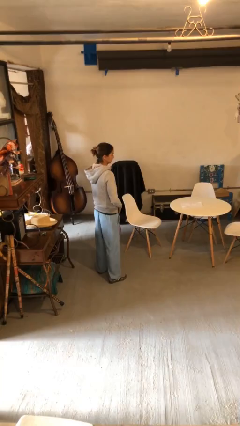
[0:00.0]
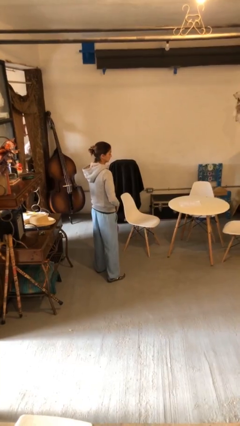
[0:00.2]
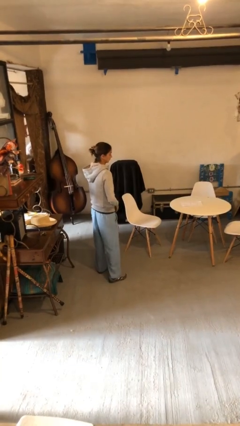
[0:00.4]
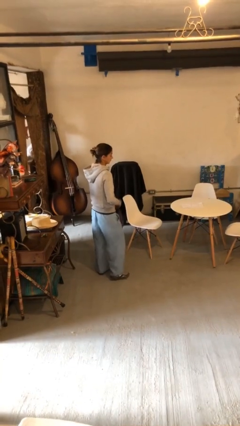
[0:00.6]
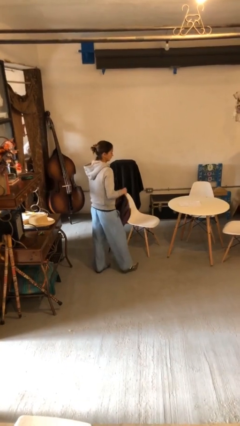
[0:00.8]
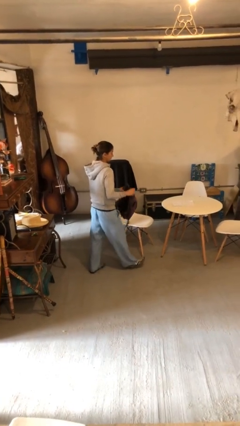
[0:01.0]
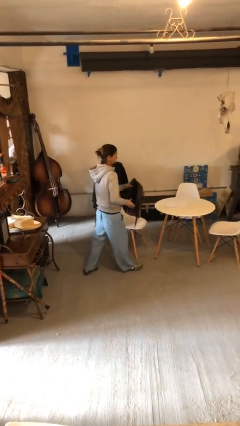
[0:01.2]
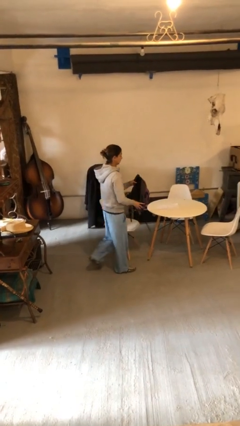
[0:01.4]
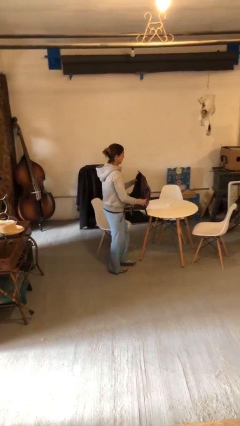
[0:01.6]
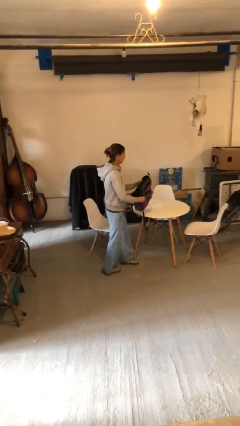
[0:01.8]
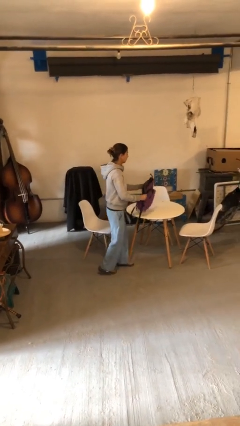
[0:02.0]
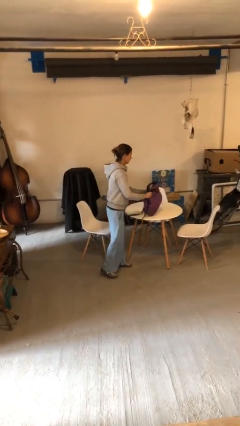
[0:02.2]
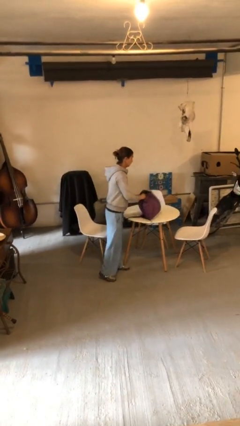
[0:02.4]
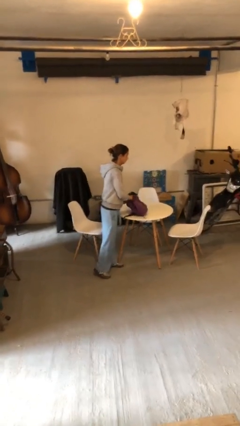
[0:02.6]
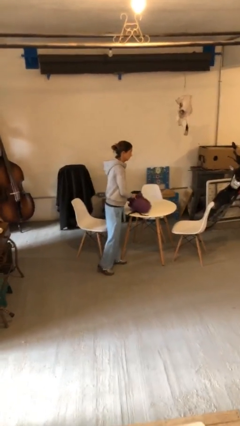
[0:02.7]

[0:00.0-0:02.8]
person puts down object on table

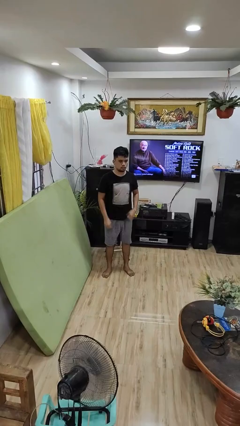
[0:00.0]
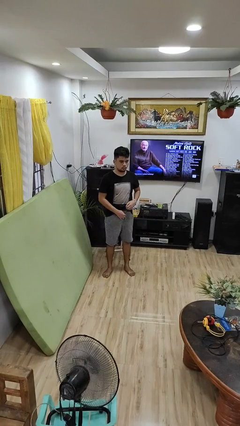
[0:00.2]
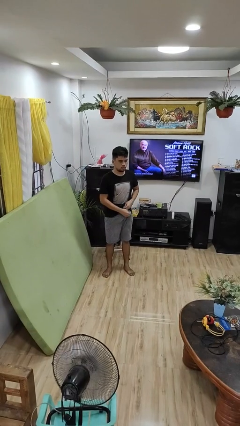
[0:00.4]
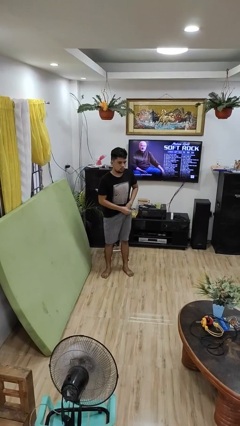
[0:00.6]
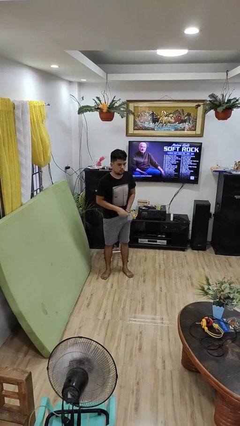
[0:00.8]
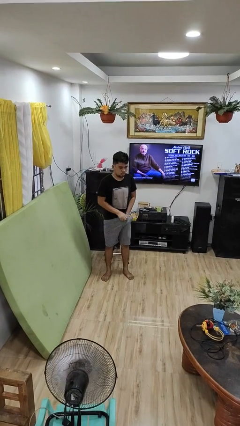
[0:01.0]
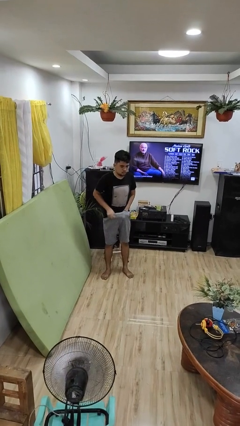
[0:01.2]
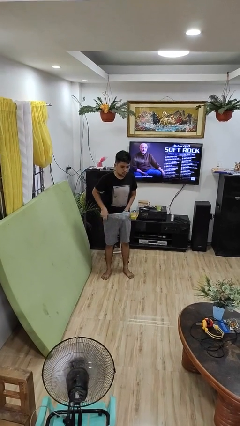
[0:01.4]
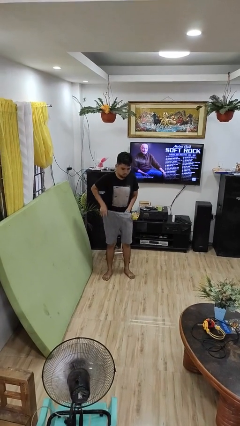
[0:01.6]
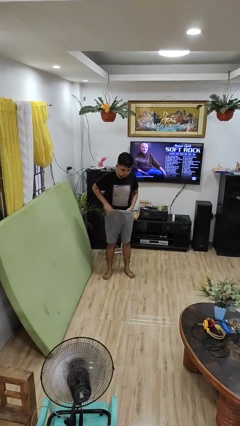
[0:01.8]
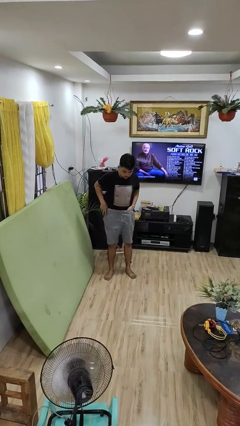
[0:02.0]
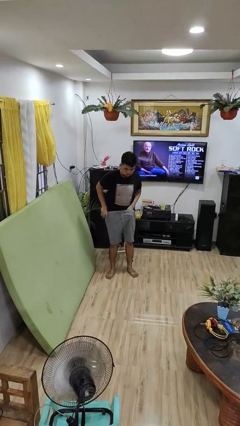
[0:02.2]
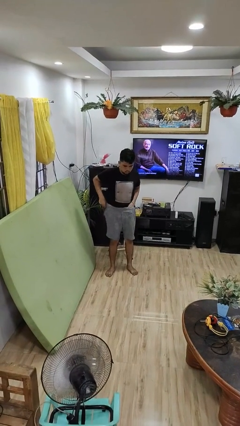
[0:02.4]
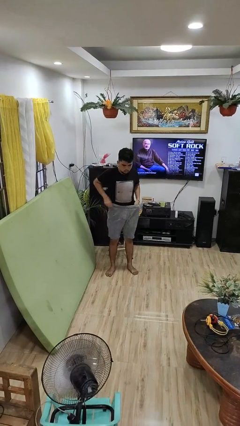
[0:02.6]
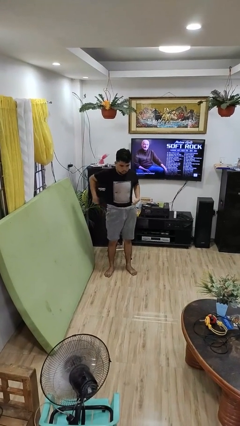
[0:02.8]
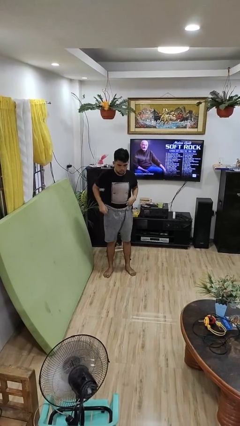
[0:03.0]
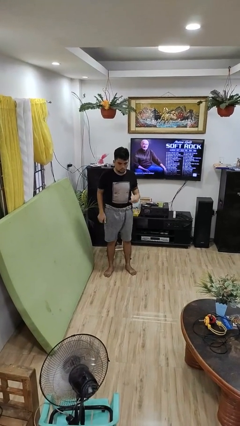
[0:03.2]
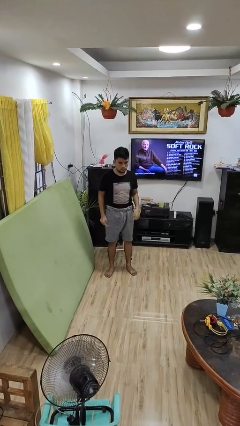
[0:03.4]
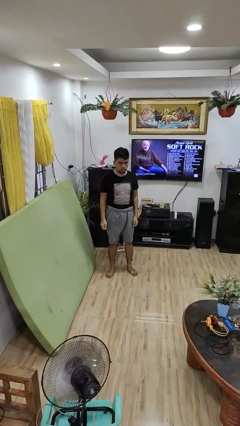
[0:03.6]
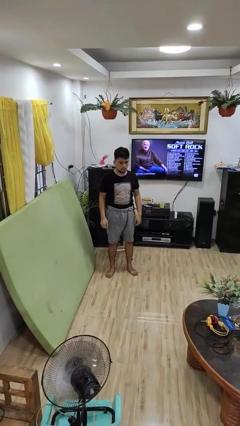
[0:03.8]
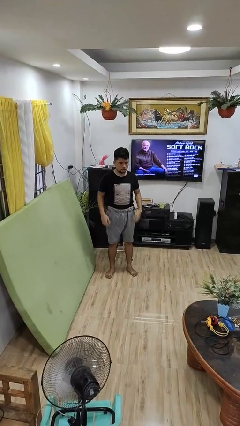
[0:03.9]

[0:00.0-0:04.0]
person tucks in shirt

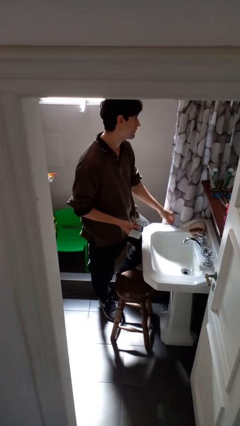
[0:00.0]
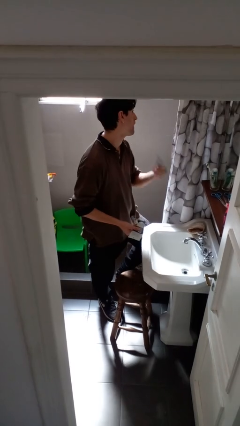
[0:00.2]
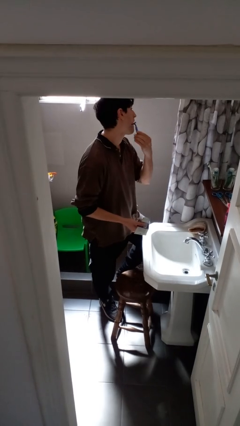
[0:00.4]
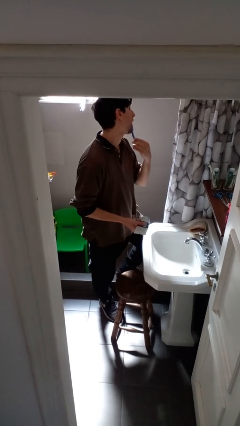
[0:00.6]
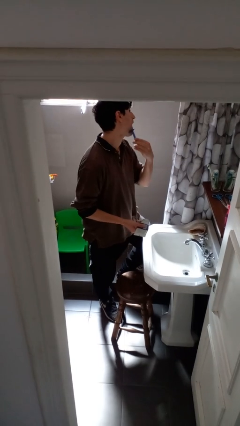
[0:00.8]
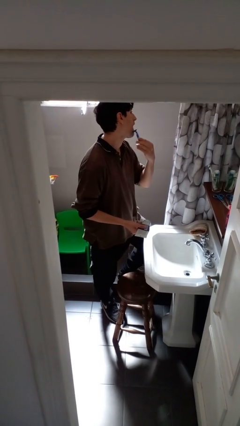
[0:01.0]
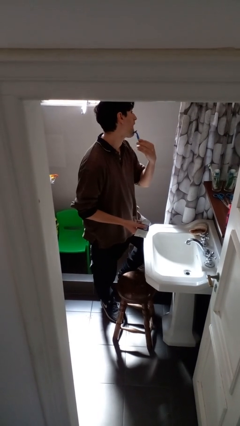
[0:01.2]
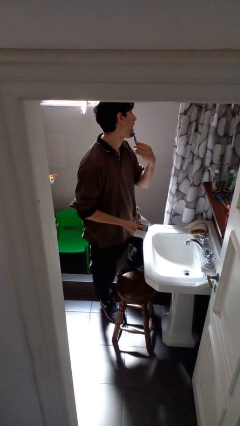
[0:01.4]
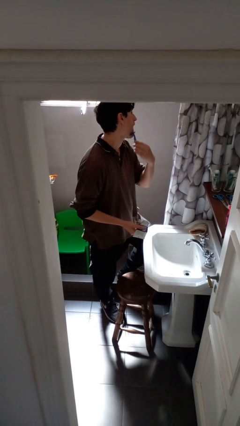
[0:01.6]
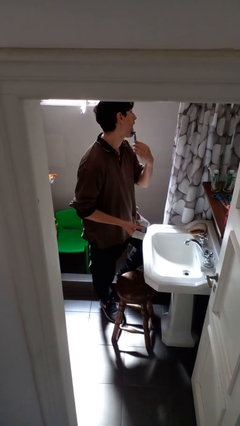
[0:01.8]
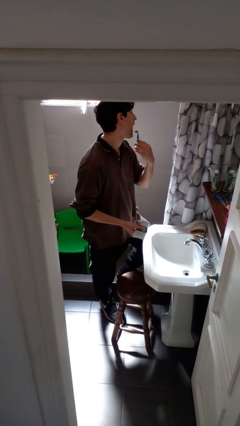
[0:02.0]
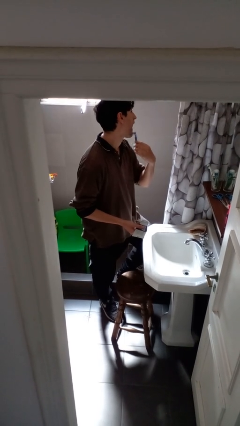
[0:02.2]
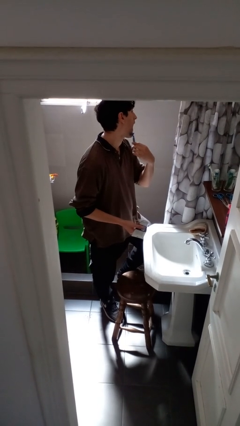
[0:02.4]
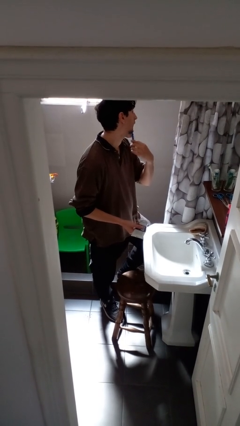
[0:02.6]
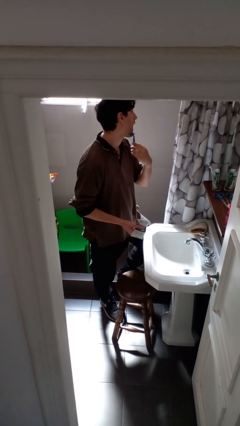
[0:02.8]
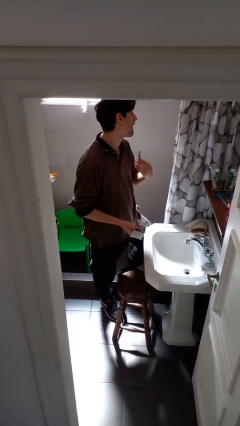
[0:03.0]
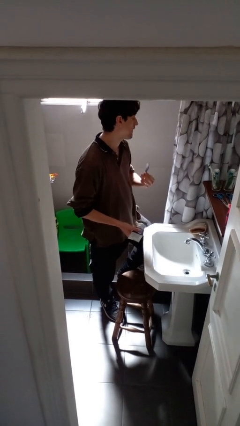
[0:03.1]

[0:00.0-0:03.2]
person shaves face

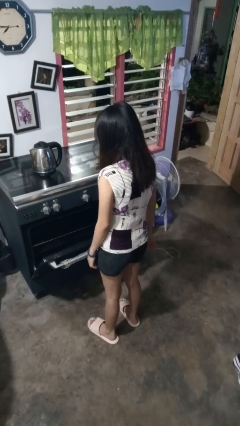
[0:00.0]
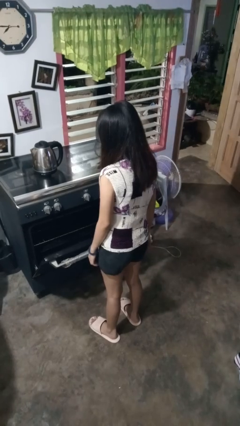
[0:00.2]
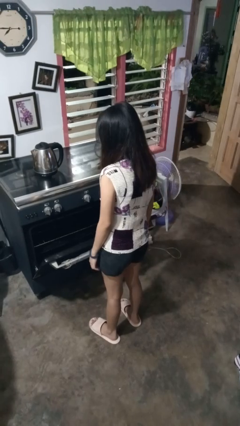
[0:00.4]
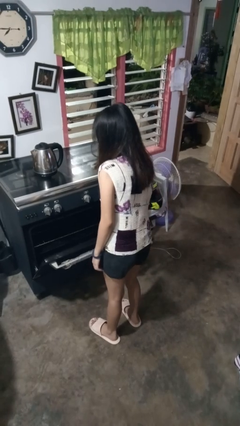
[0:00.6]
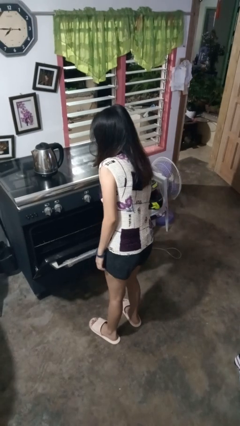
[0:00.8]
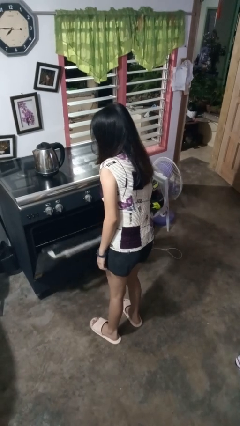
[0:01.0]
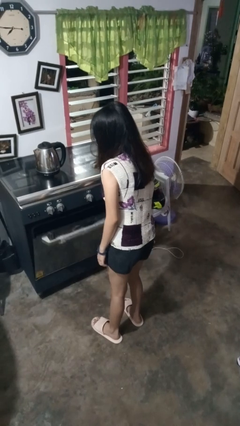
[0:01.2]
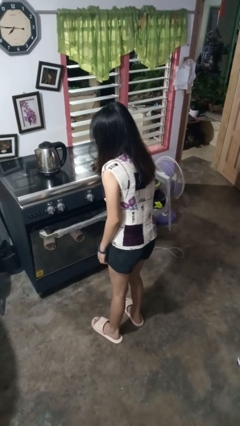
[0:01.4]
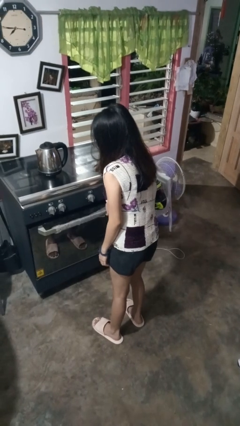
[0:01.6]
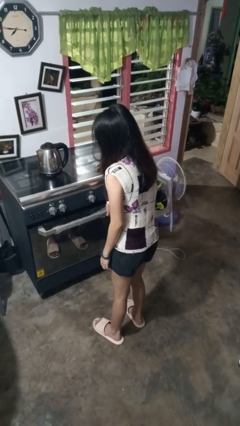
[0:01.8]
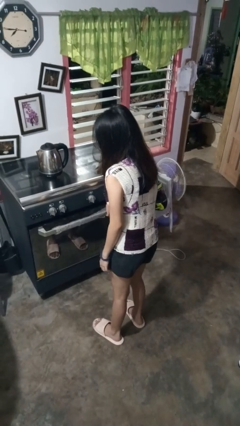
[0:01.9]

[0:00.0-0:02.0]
person closes oven door

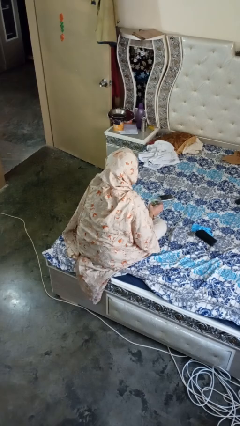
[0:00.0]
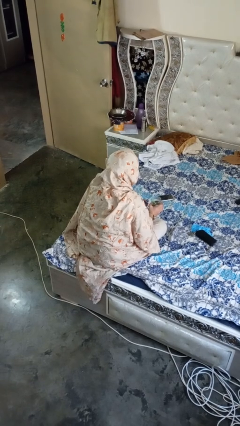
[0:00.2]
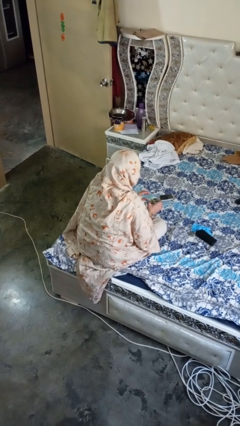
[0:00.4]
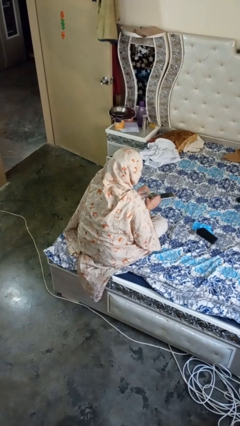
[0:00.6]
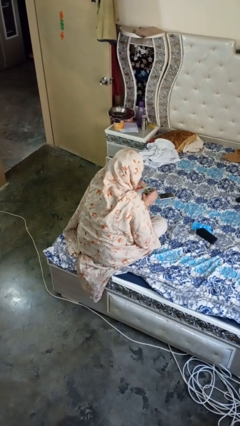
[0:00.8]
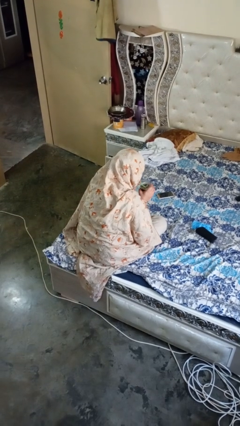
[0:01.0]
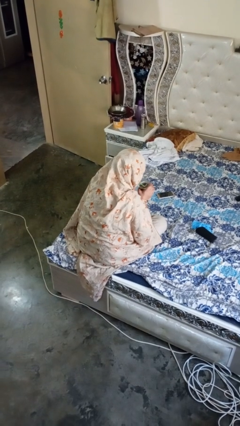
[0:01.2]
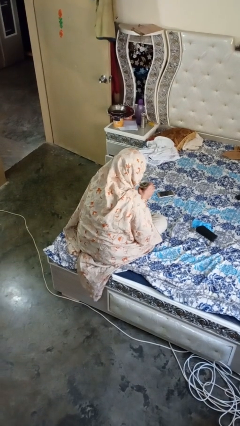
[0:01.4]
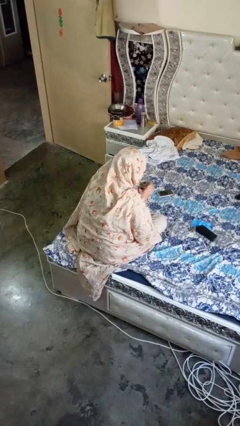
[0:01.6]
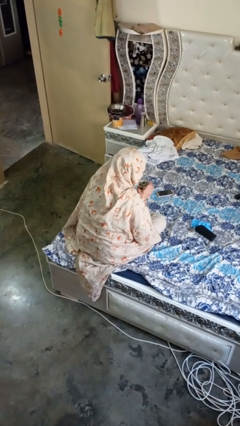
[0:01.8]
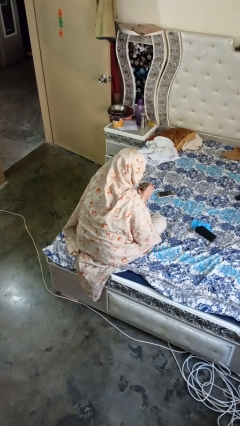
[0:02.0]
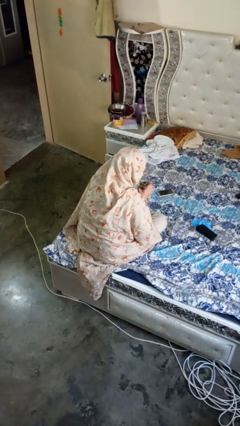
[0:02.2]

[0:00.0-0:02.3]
person drinks from straw

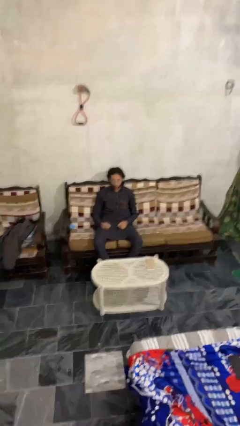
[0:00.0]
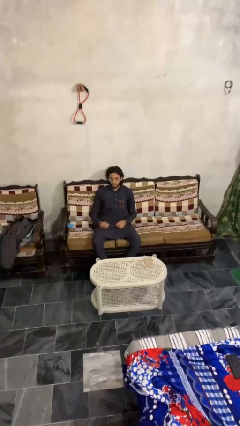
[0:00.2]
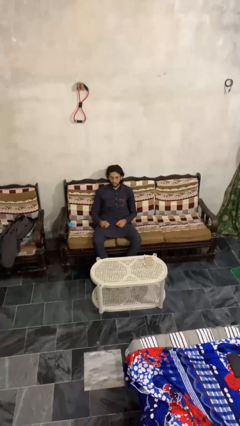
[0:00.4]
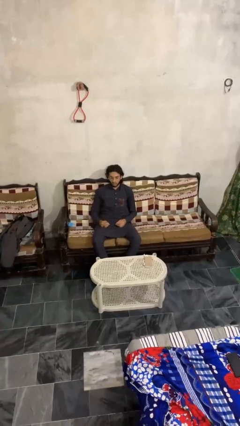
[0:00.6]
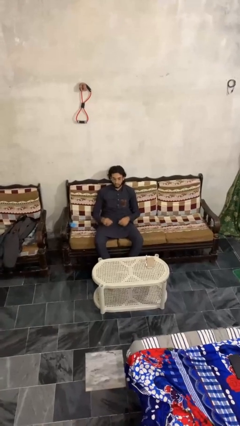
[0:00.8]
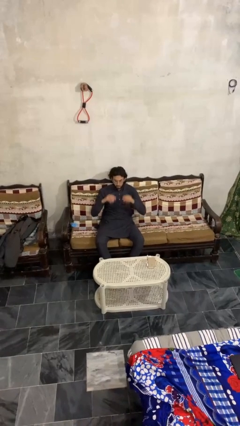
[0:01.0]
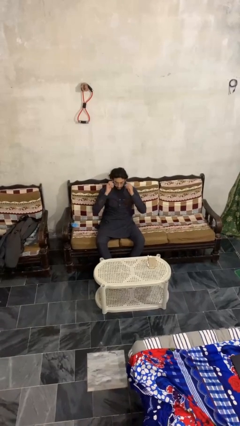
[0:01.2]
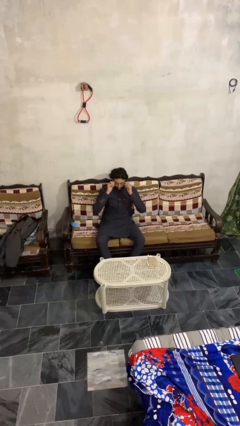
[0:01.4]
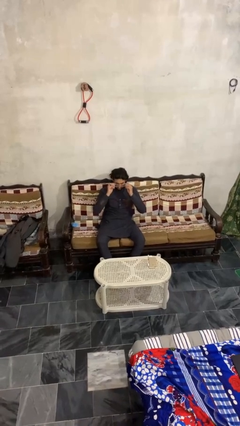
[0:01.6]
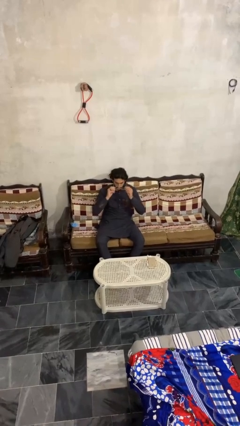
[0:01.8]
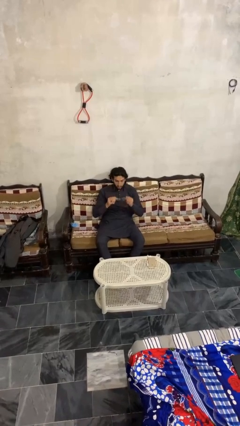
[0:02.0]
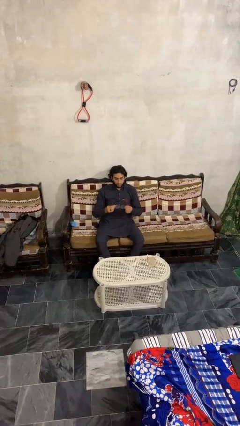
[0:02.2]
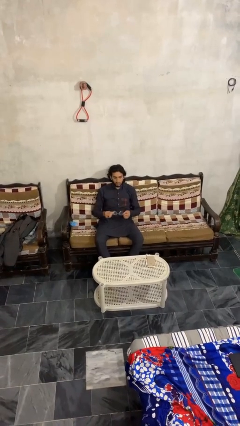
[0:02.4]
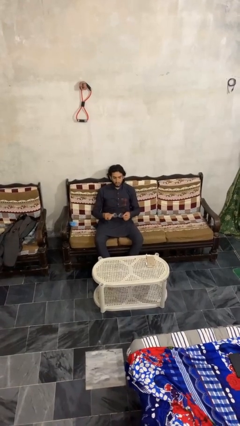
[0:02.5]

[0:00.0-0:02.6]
person takes off glasses

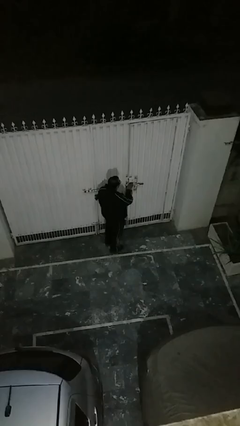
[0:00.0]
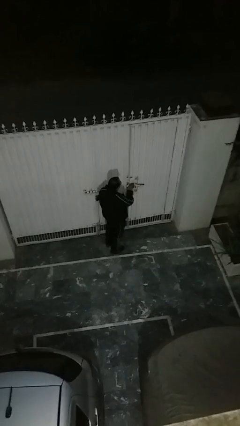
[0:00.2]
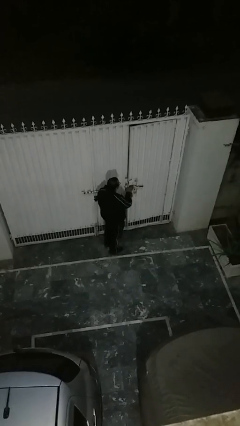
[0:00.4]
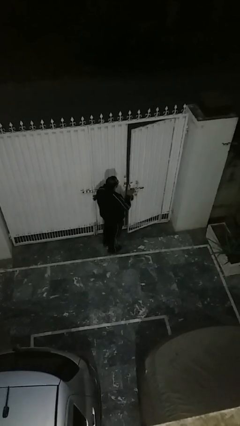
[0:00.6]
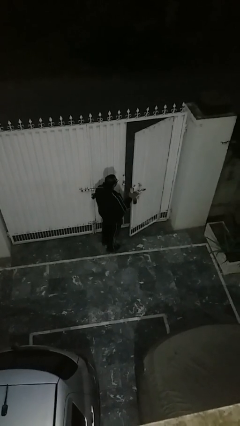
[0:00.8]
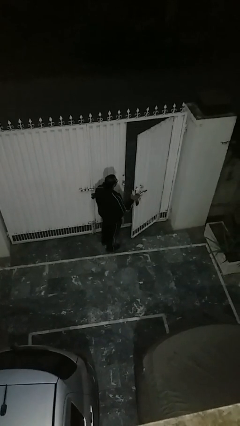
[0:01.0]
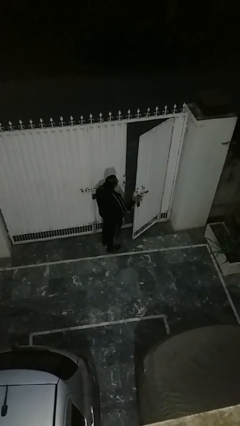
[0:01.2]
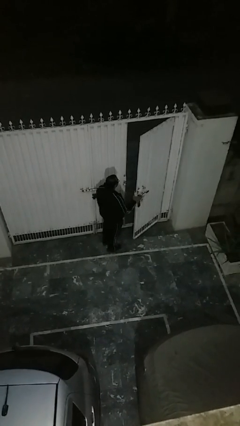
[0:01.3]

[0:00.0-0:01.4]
person opens facility door
